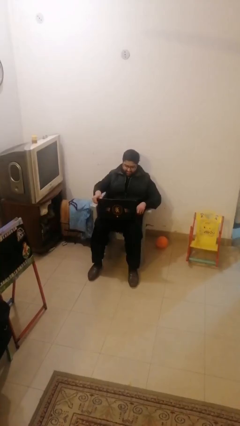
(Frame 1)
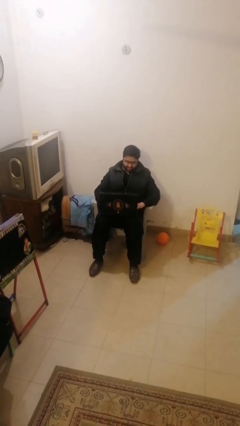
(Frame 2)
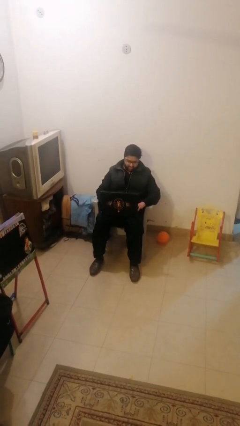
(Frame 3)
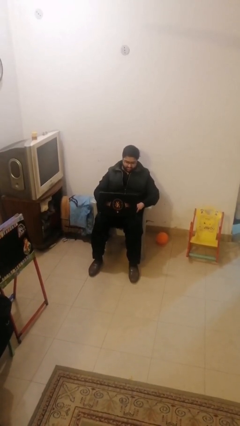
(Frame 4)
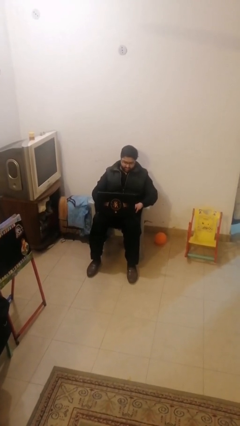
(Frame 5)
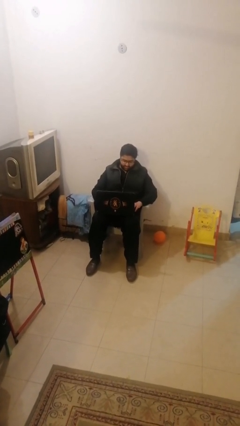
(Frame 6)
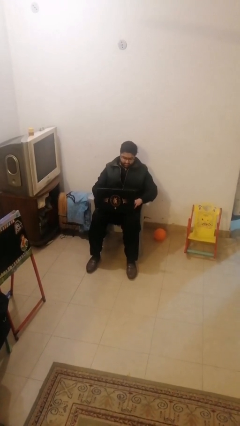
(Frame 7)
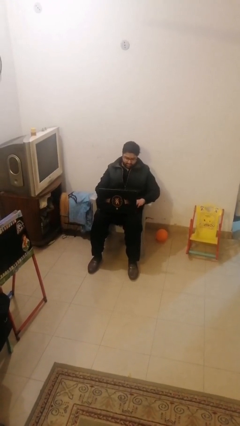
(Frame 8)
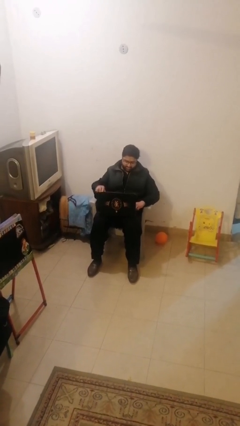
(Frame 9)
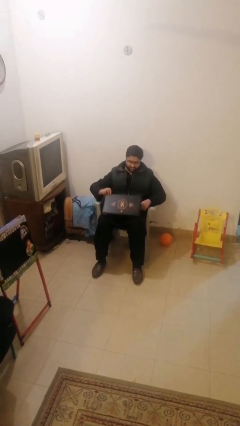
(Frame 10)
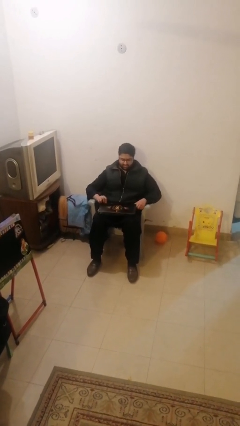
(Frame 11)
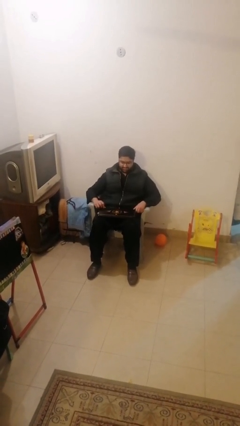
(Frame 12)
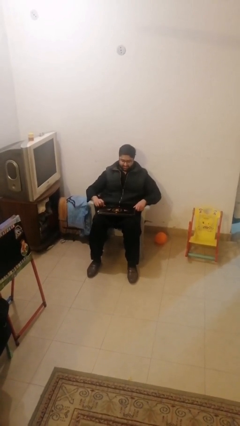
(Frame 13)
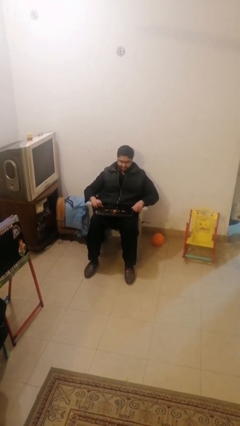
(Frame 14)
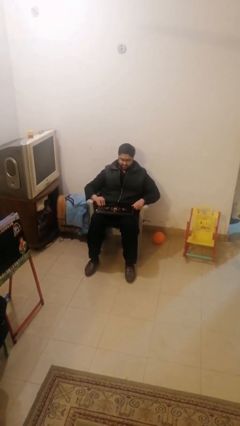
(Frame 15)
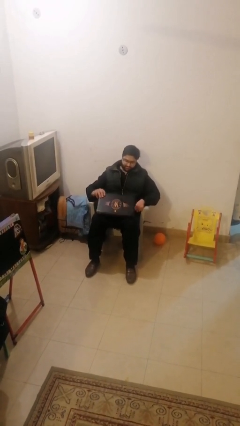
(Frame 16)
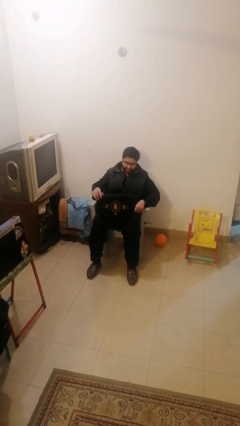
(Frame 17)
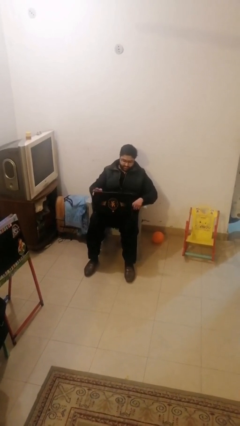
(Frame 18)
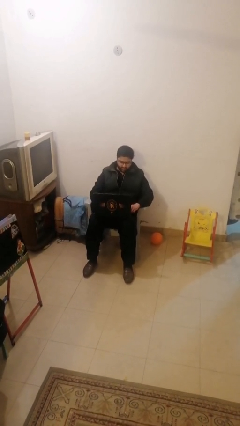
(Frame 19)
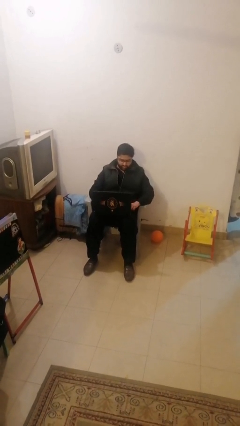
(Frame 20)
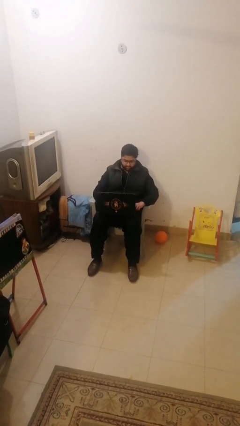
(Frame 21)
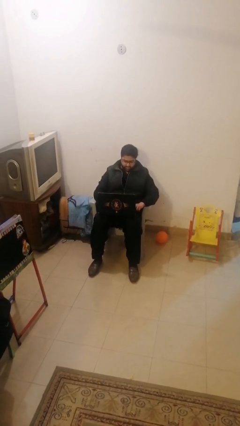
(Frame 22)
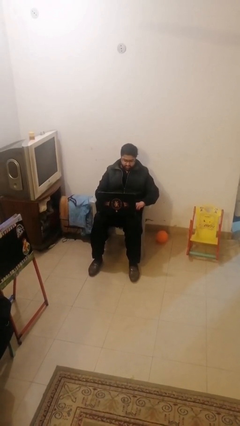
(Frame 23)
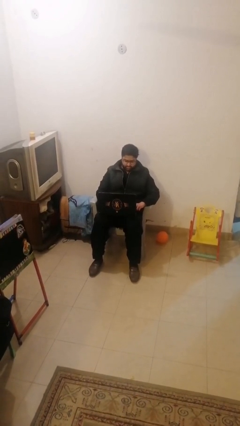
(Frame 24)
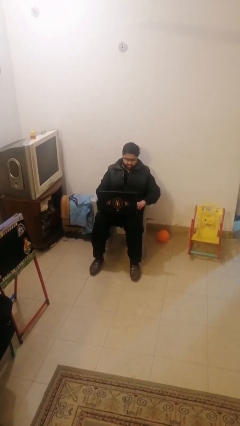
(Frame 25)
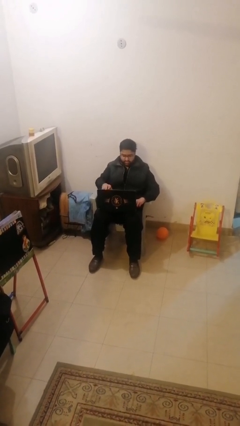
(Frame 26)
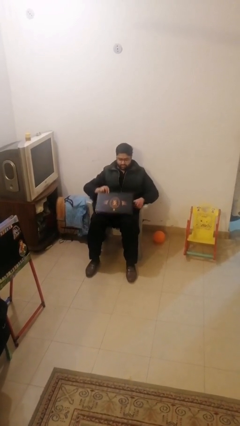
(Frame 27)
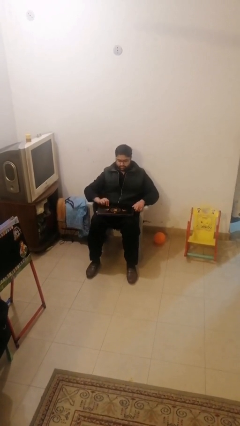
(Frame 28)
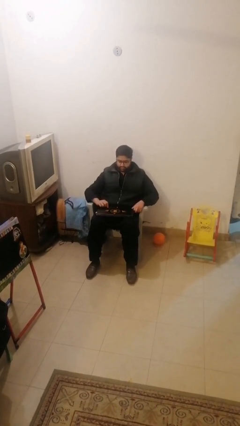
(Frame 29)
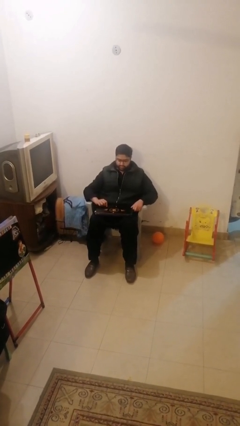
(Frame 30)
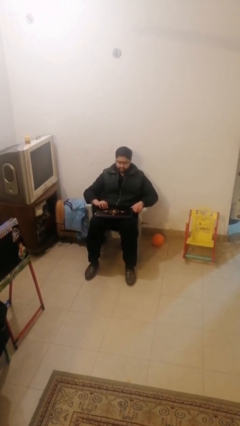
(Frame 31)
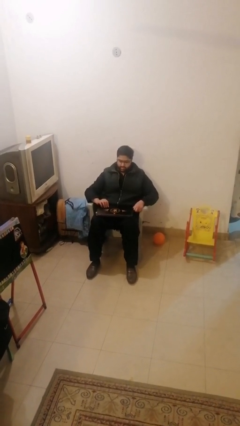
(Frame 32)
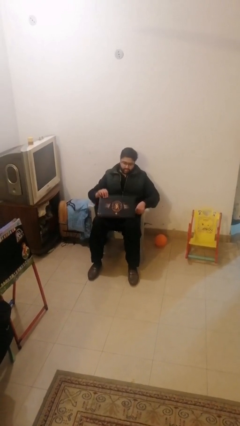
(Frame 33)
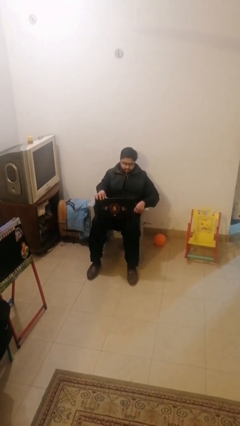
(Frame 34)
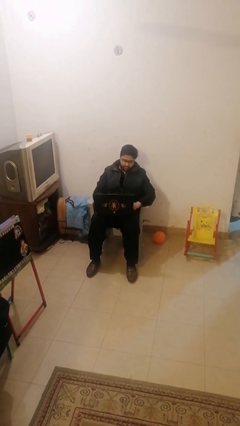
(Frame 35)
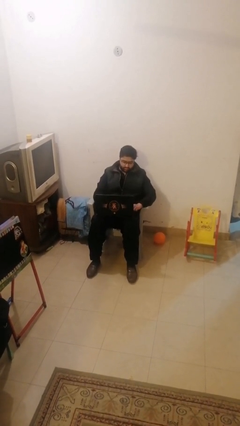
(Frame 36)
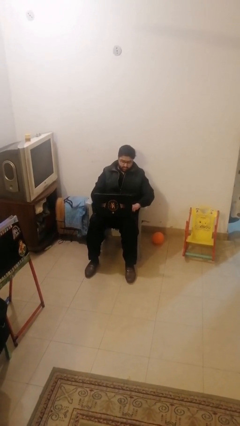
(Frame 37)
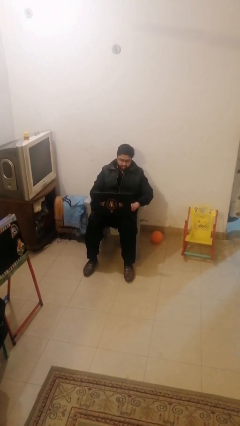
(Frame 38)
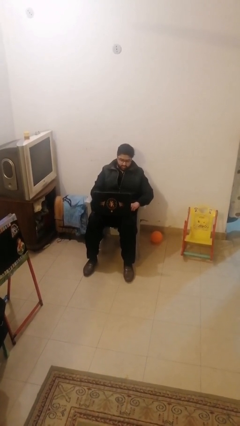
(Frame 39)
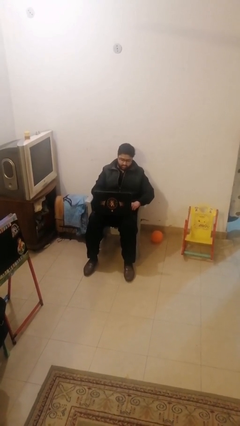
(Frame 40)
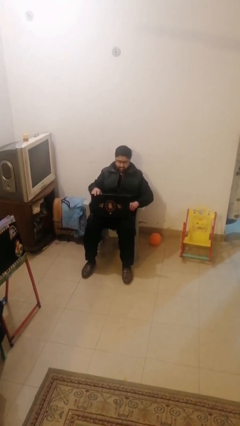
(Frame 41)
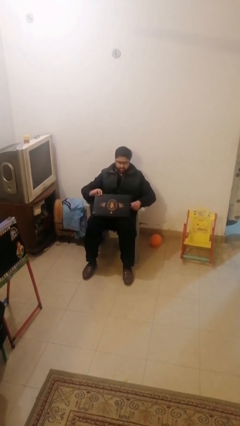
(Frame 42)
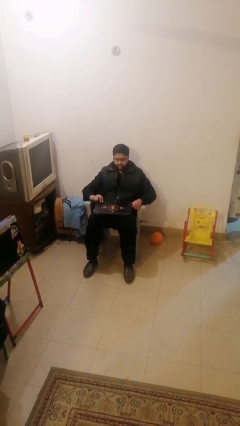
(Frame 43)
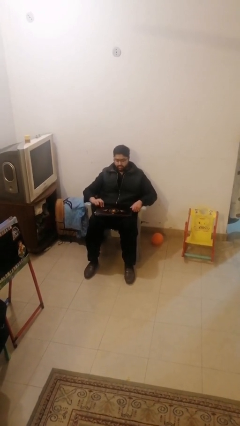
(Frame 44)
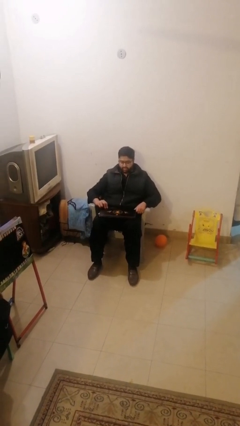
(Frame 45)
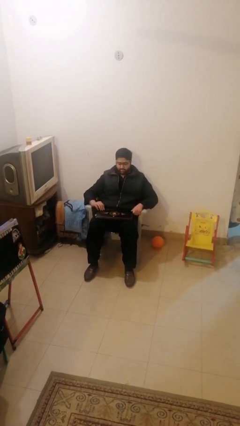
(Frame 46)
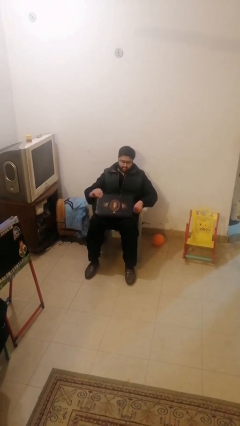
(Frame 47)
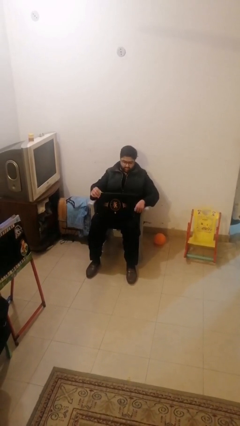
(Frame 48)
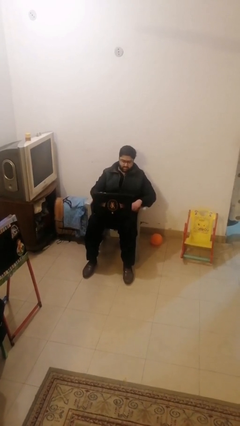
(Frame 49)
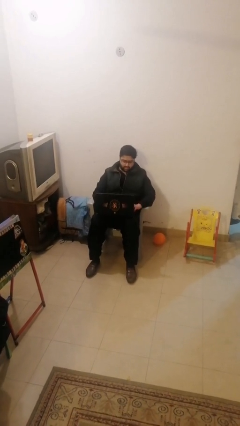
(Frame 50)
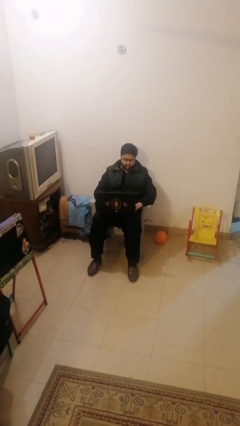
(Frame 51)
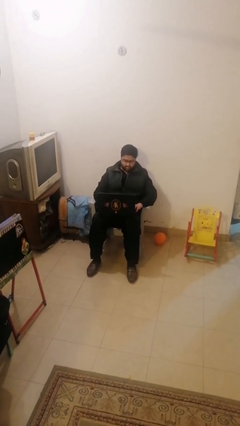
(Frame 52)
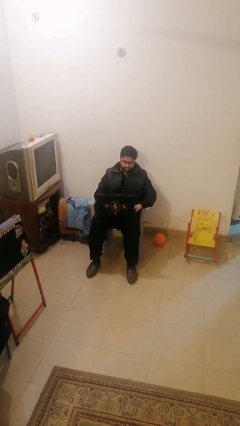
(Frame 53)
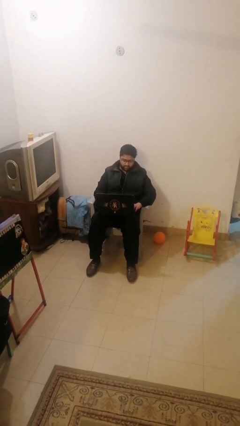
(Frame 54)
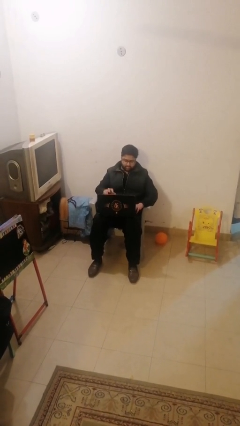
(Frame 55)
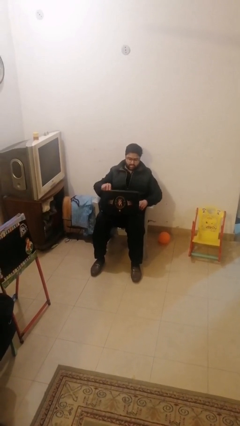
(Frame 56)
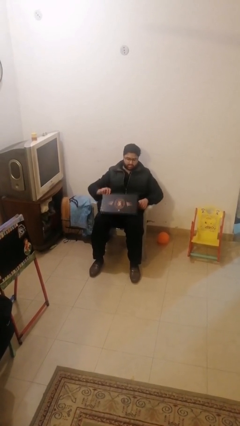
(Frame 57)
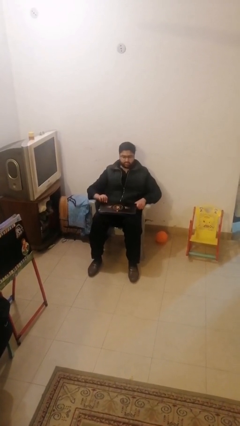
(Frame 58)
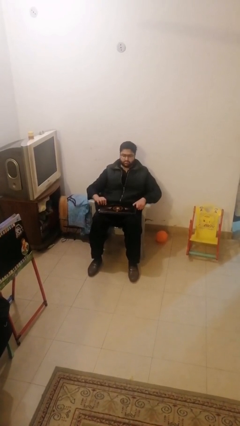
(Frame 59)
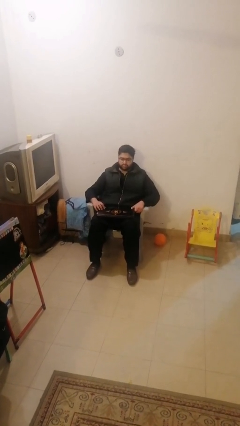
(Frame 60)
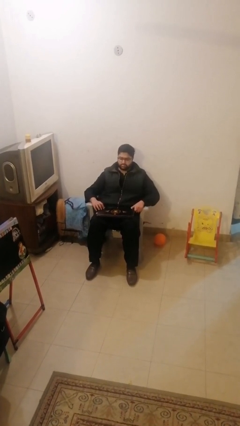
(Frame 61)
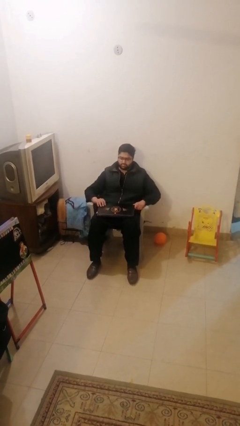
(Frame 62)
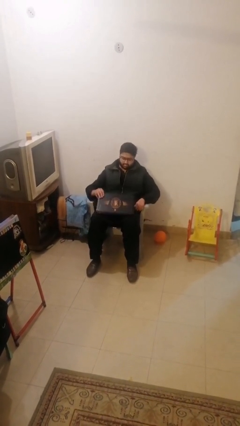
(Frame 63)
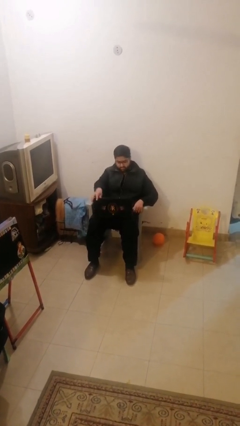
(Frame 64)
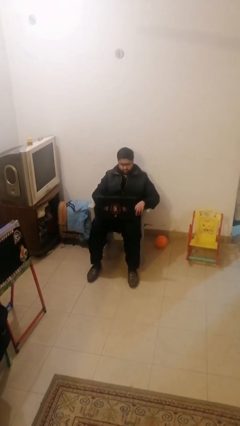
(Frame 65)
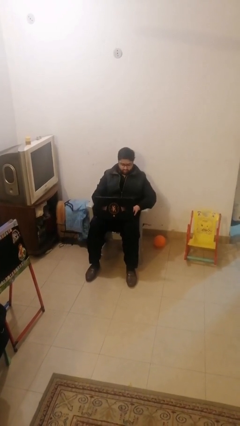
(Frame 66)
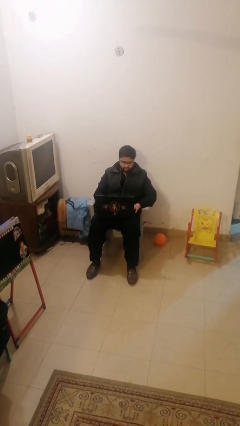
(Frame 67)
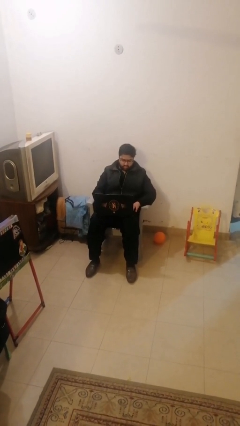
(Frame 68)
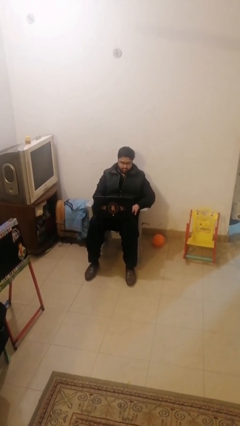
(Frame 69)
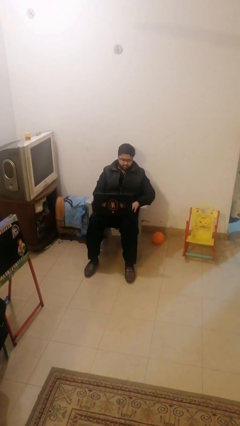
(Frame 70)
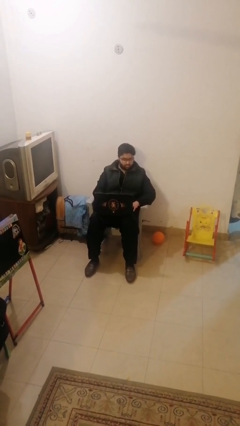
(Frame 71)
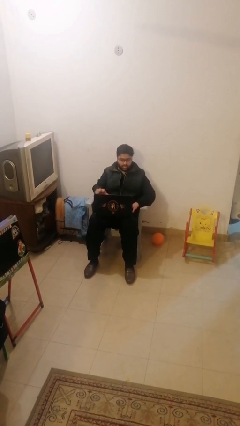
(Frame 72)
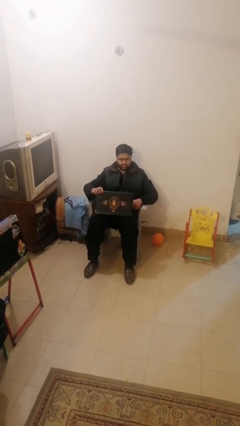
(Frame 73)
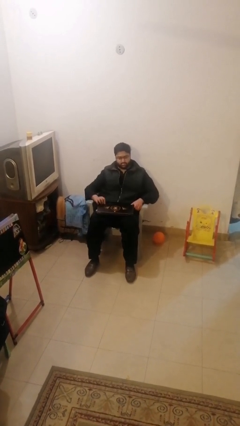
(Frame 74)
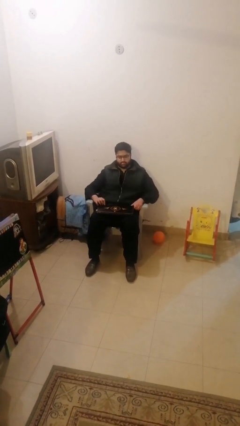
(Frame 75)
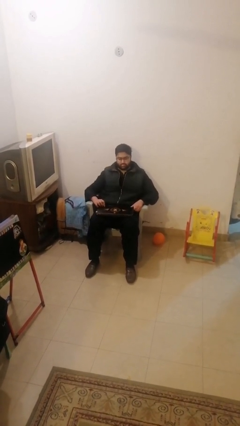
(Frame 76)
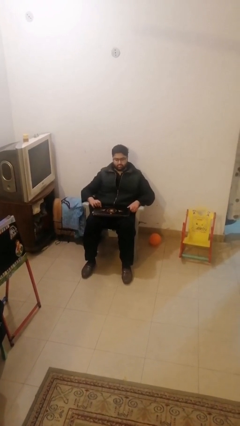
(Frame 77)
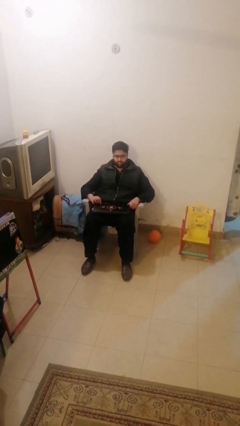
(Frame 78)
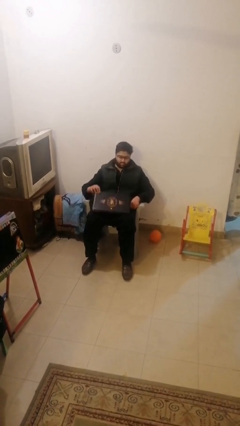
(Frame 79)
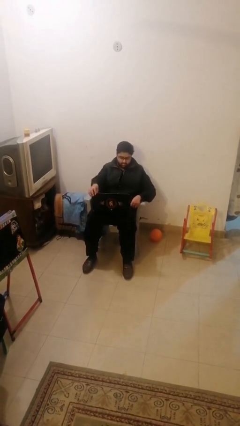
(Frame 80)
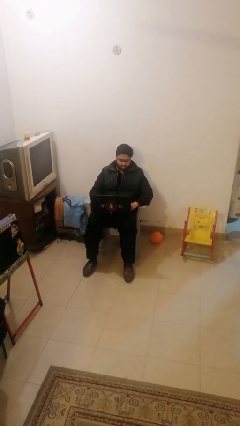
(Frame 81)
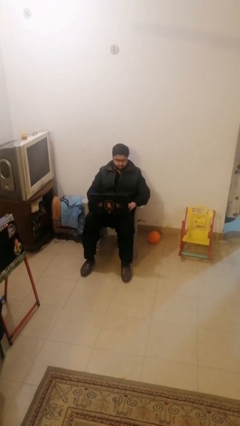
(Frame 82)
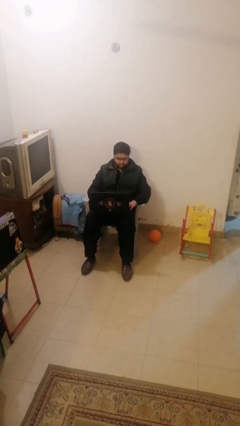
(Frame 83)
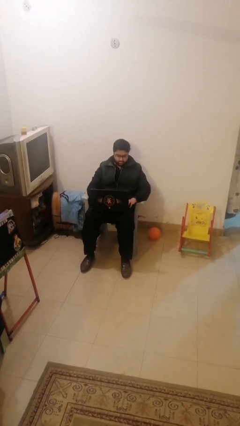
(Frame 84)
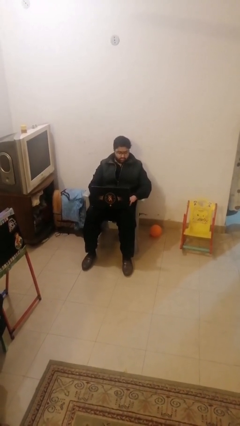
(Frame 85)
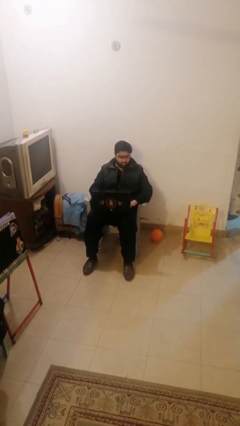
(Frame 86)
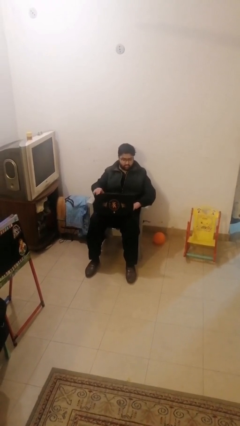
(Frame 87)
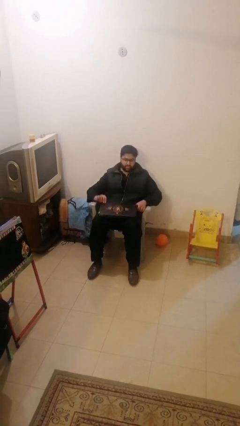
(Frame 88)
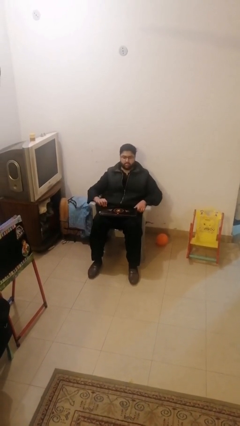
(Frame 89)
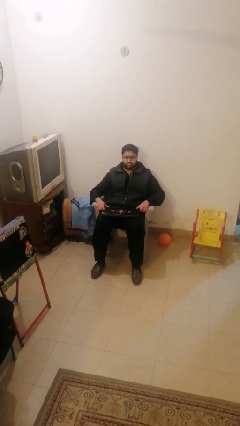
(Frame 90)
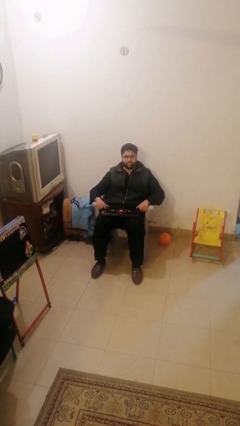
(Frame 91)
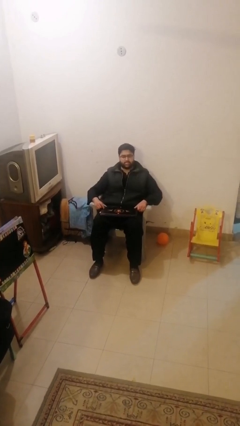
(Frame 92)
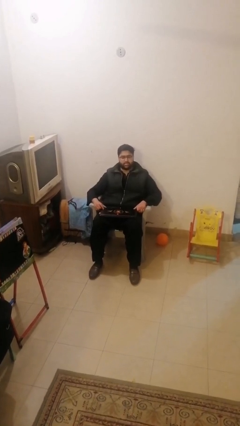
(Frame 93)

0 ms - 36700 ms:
person interacts with laptop
